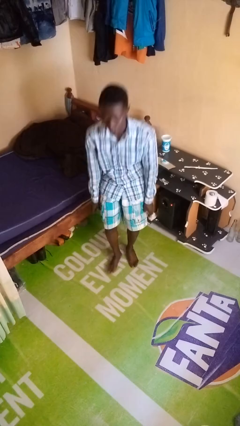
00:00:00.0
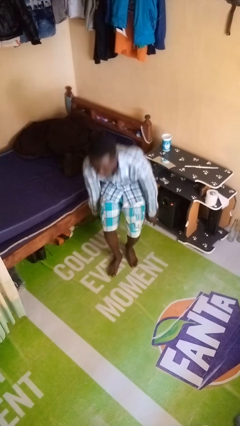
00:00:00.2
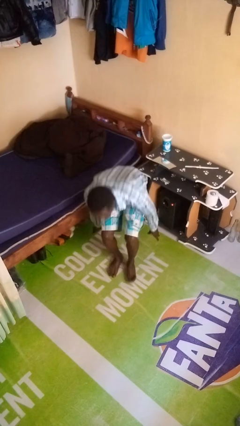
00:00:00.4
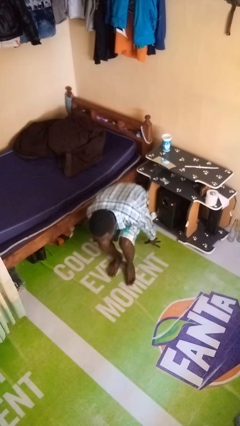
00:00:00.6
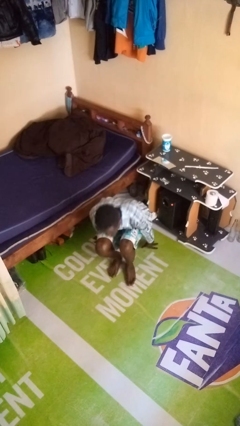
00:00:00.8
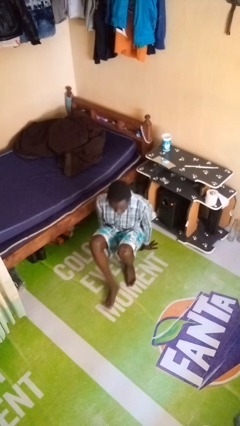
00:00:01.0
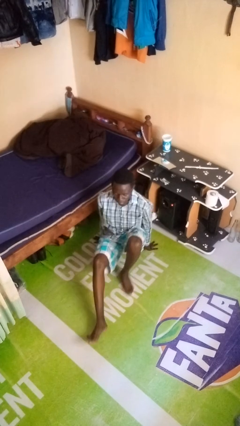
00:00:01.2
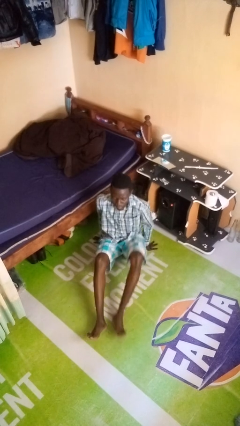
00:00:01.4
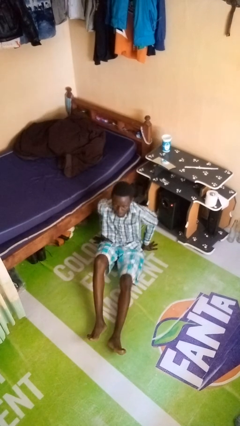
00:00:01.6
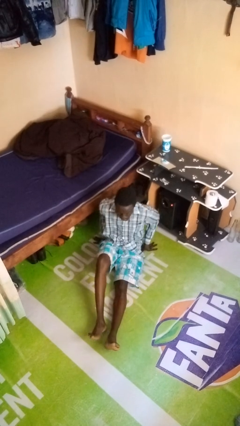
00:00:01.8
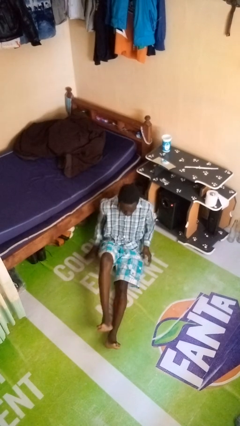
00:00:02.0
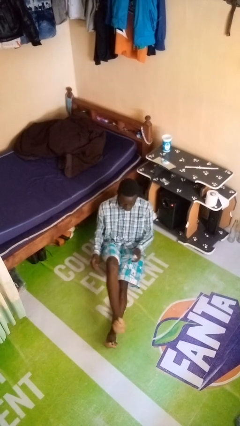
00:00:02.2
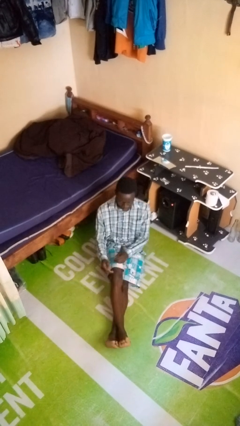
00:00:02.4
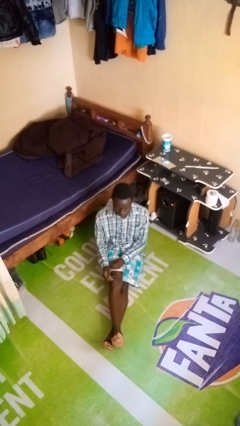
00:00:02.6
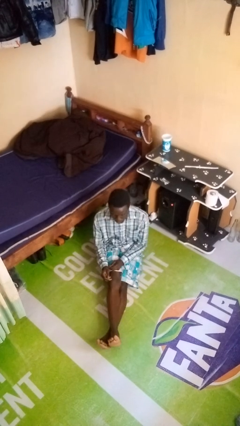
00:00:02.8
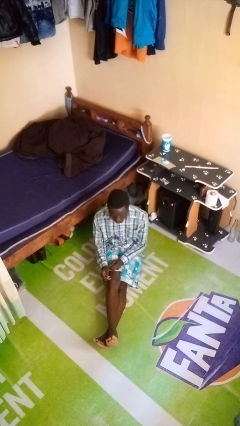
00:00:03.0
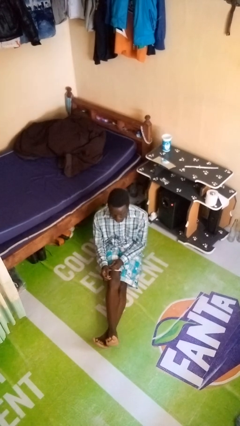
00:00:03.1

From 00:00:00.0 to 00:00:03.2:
person sits crisscross

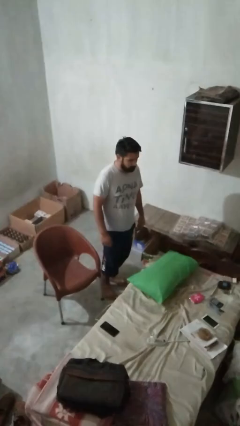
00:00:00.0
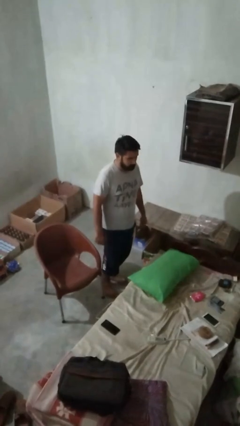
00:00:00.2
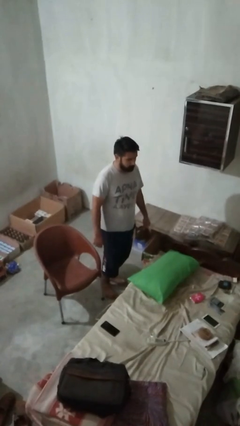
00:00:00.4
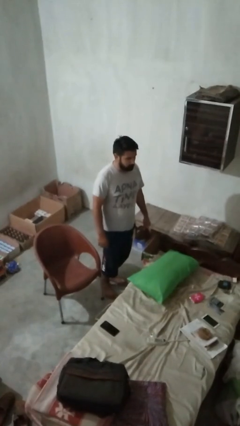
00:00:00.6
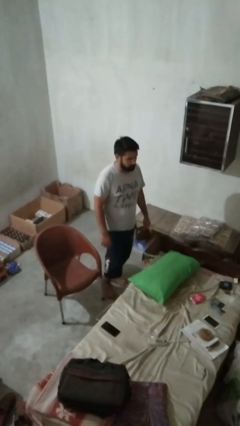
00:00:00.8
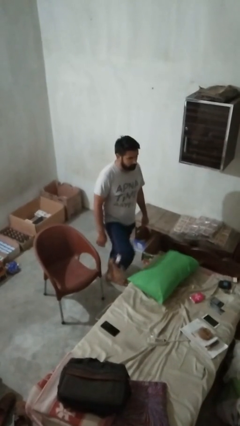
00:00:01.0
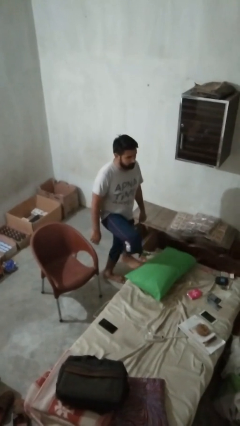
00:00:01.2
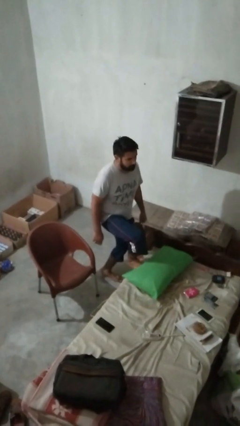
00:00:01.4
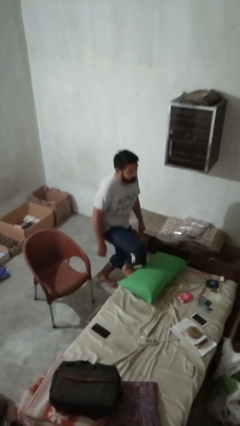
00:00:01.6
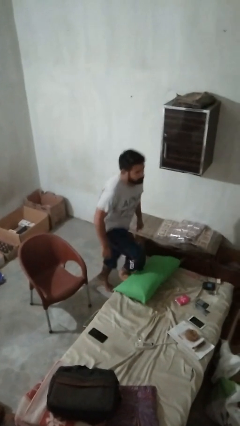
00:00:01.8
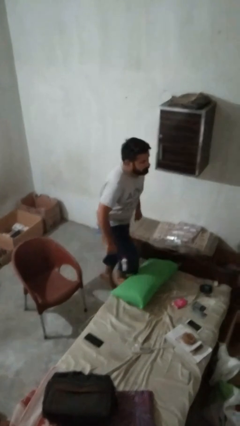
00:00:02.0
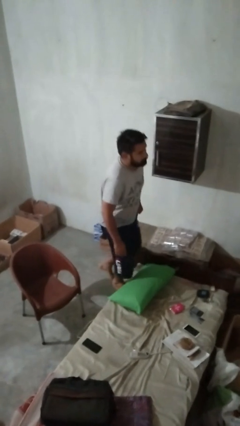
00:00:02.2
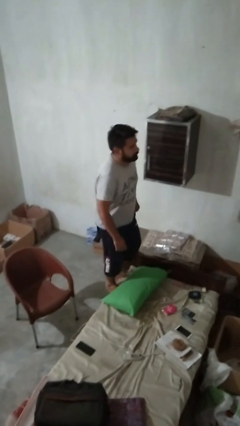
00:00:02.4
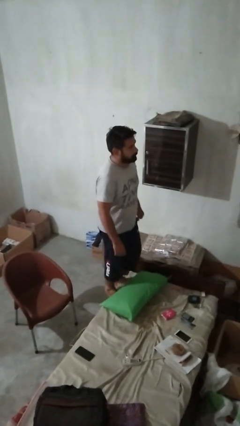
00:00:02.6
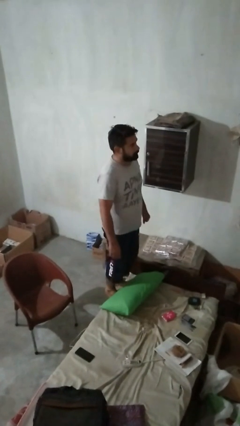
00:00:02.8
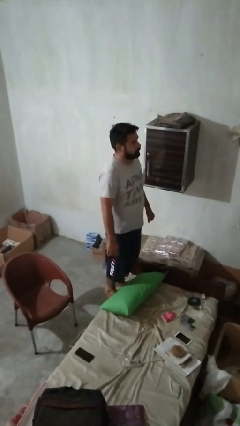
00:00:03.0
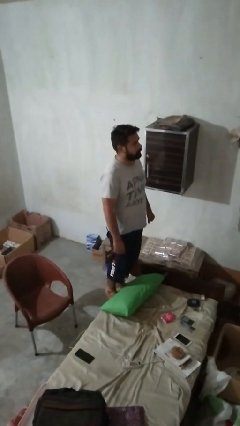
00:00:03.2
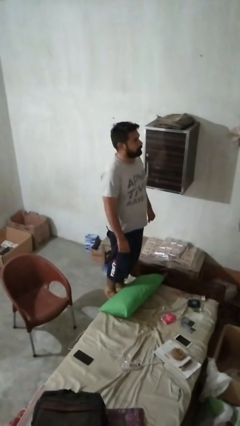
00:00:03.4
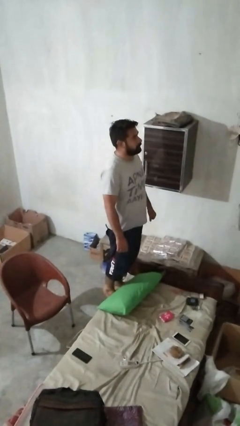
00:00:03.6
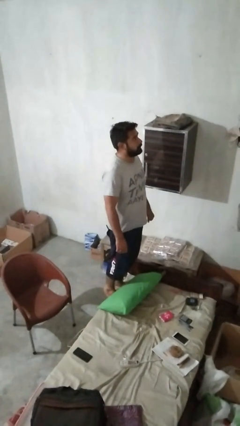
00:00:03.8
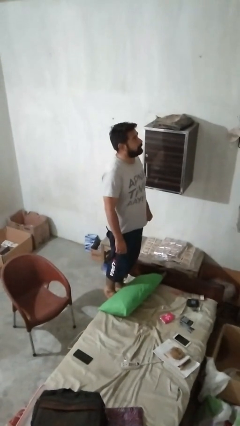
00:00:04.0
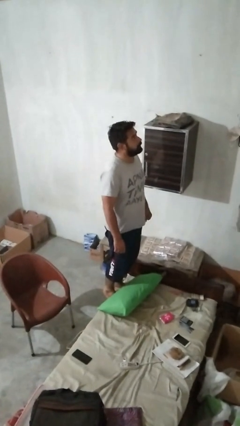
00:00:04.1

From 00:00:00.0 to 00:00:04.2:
person climbs on couch

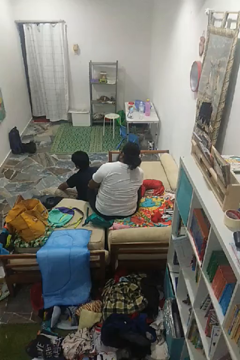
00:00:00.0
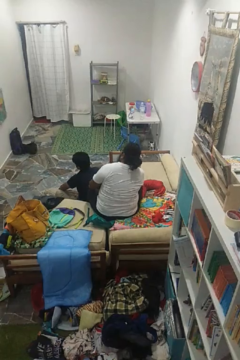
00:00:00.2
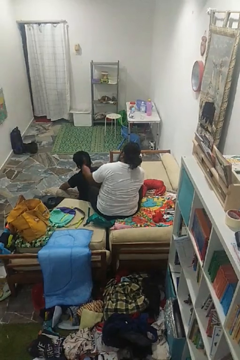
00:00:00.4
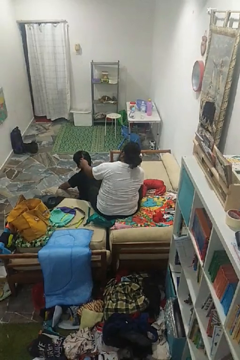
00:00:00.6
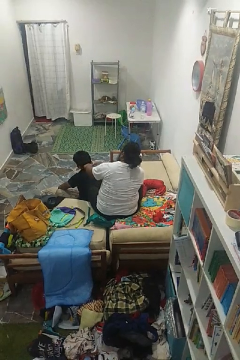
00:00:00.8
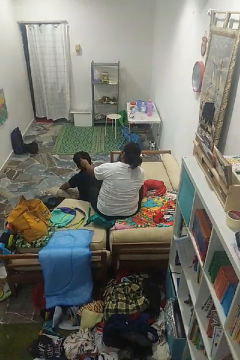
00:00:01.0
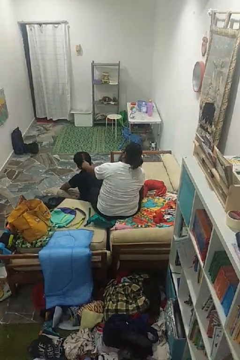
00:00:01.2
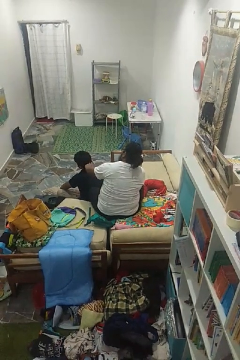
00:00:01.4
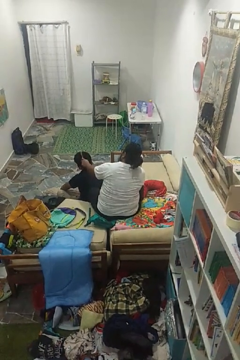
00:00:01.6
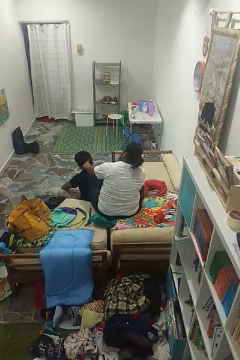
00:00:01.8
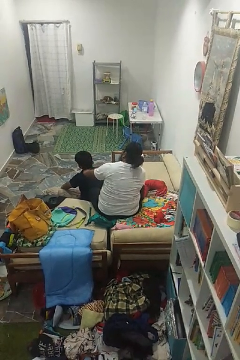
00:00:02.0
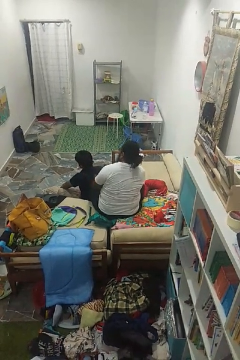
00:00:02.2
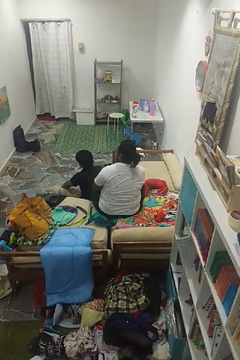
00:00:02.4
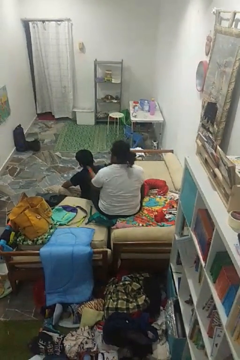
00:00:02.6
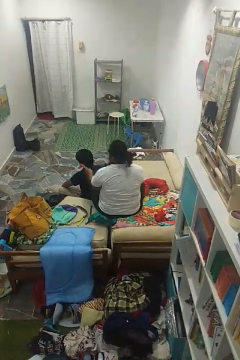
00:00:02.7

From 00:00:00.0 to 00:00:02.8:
person brushes hair of person

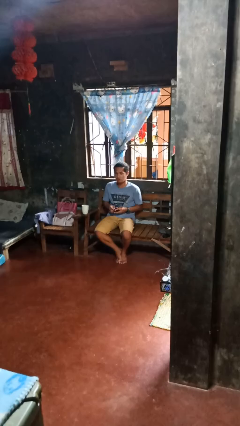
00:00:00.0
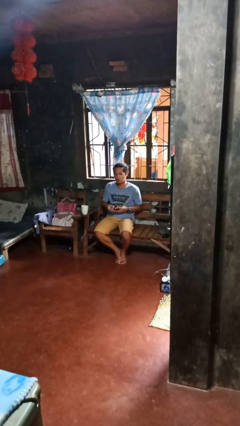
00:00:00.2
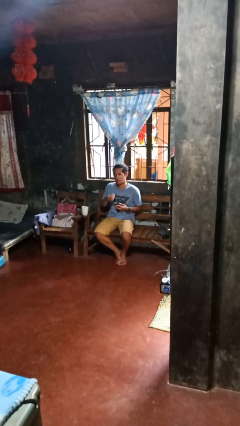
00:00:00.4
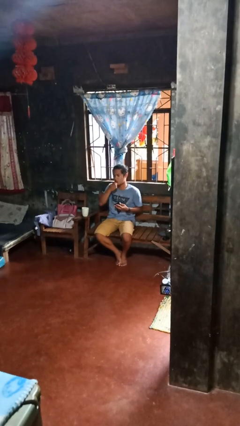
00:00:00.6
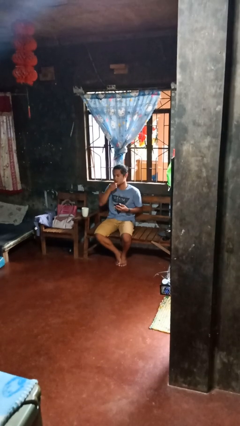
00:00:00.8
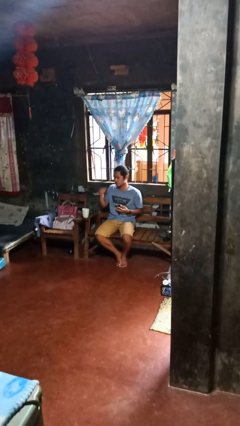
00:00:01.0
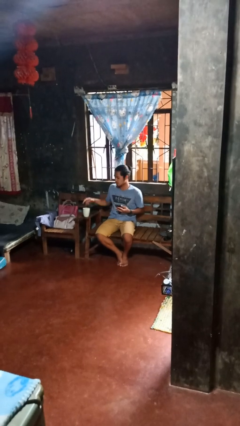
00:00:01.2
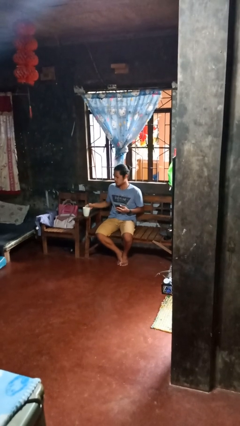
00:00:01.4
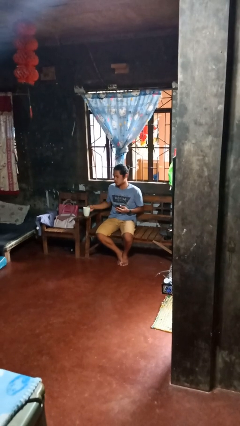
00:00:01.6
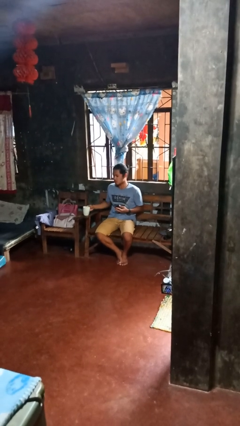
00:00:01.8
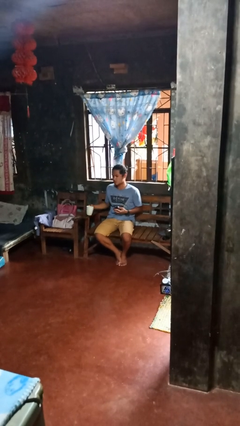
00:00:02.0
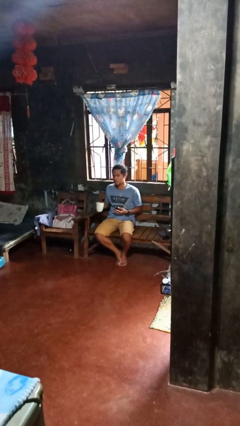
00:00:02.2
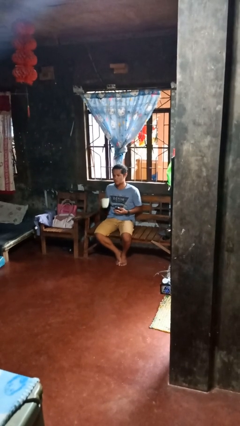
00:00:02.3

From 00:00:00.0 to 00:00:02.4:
person takes medicine pills

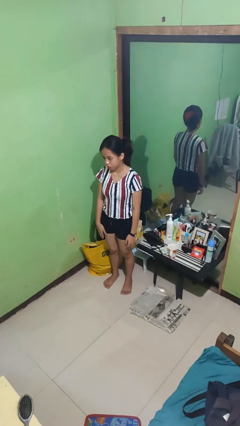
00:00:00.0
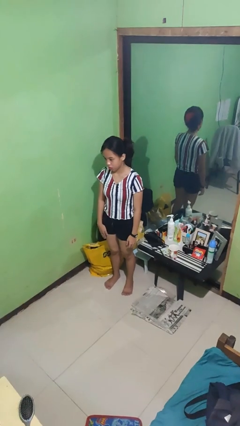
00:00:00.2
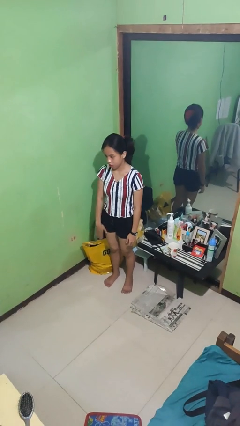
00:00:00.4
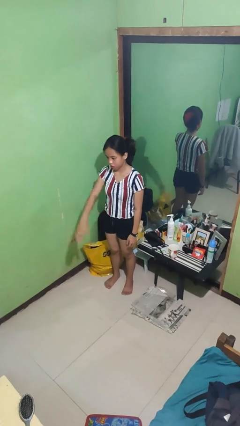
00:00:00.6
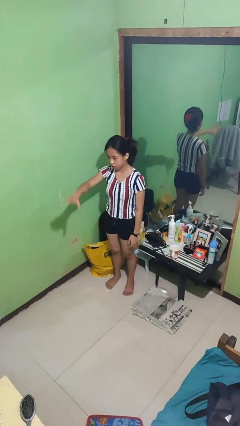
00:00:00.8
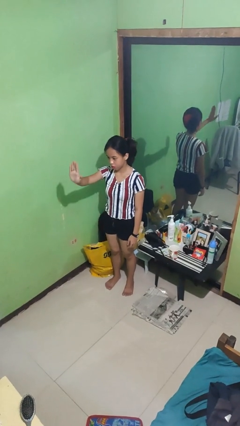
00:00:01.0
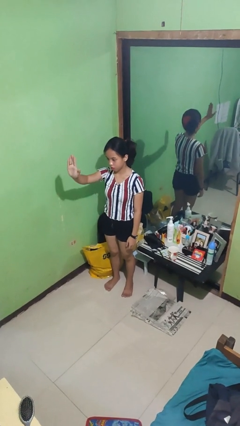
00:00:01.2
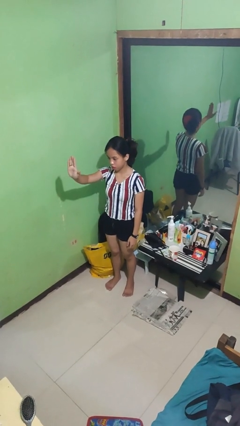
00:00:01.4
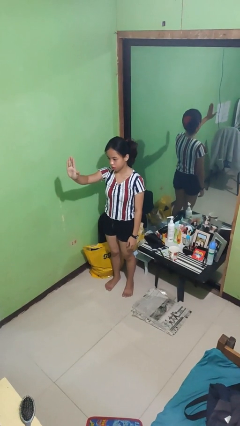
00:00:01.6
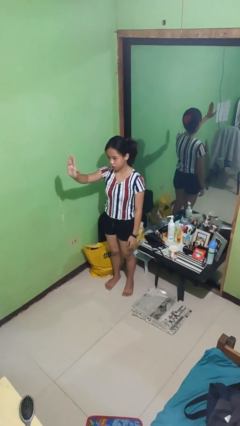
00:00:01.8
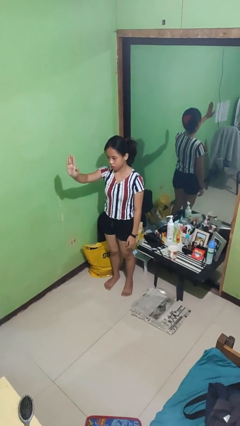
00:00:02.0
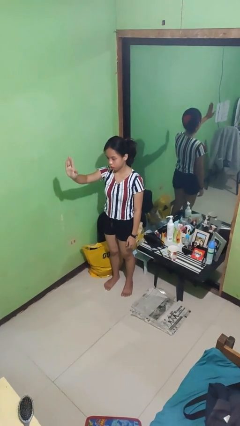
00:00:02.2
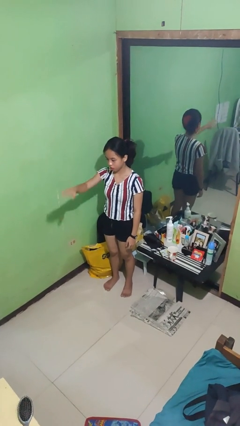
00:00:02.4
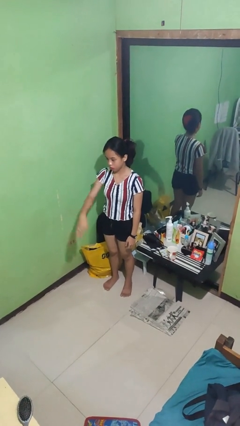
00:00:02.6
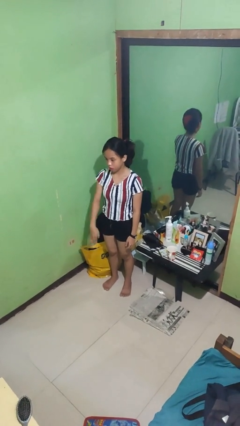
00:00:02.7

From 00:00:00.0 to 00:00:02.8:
person gestures stop

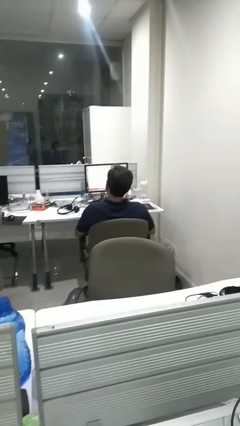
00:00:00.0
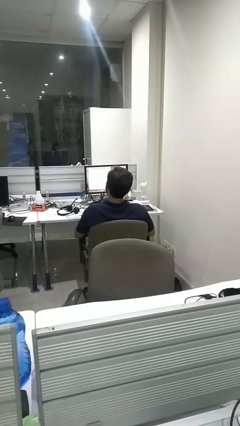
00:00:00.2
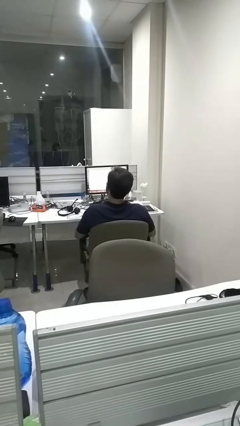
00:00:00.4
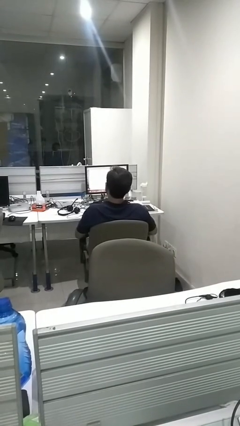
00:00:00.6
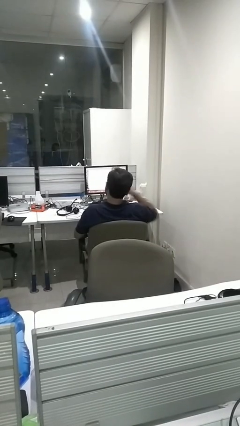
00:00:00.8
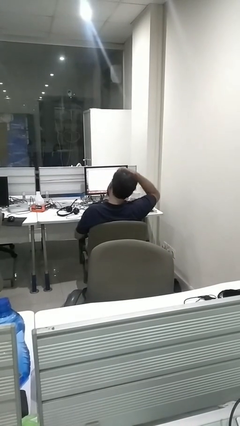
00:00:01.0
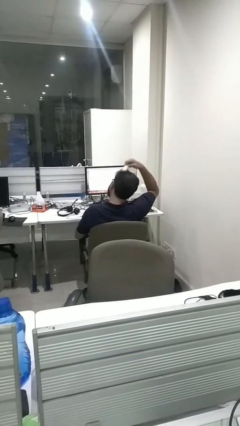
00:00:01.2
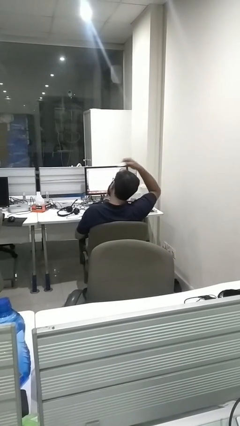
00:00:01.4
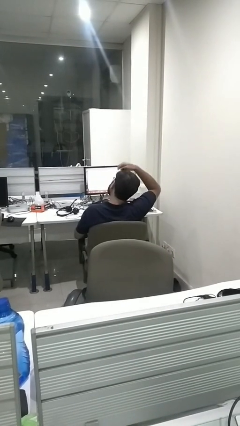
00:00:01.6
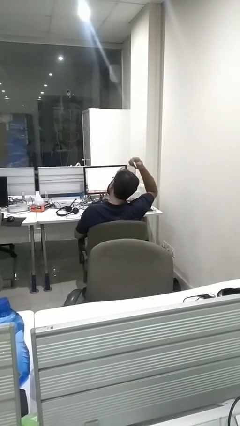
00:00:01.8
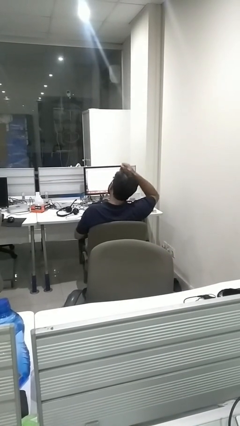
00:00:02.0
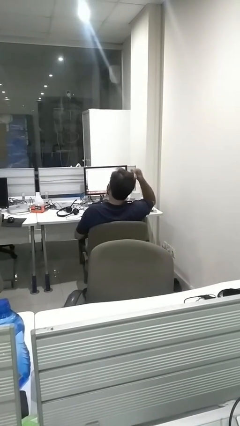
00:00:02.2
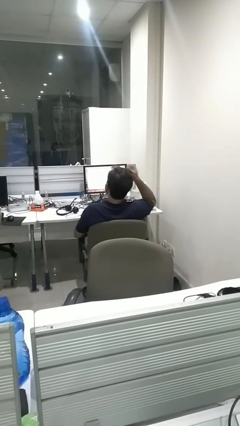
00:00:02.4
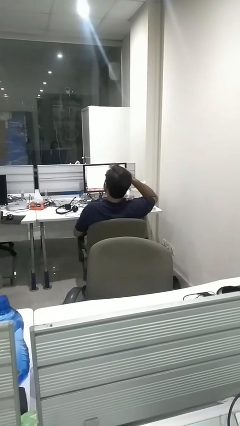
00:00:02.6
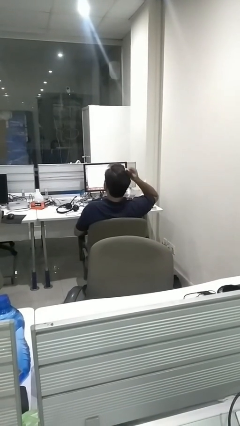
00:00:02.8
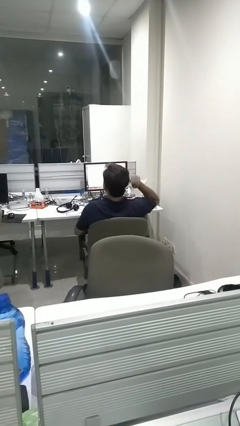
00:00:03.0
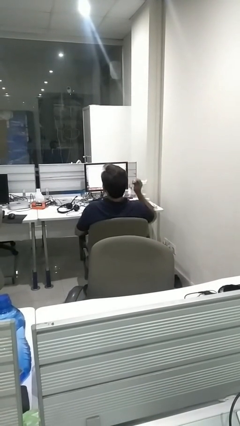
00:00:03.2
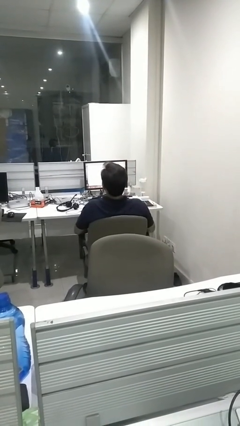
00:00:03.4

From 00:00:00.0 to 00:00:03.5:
person brushes hair
